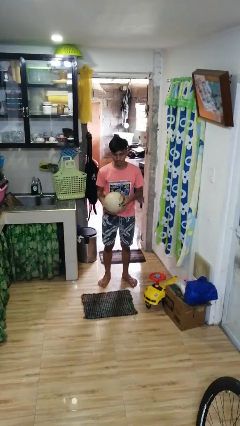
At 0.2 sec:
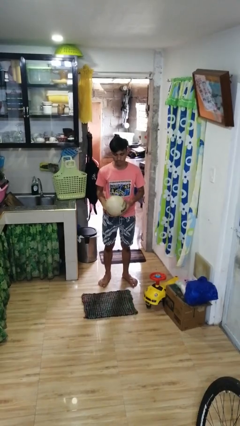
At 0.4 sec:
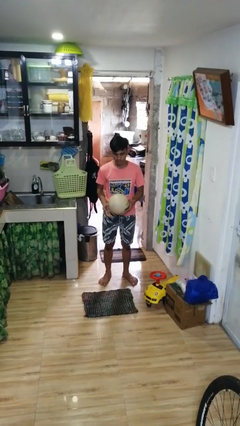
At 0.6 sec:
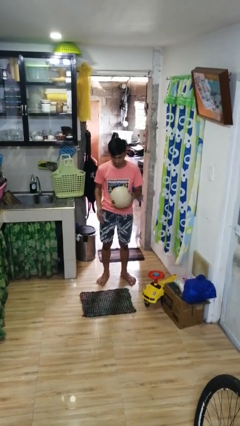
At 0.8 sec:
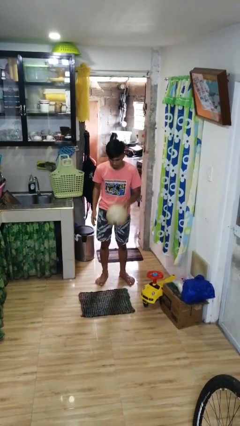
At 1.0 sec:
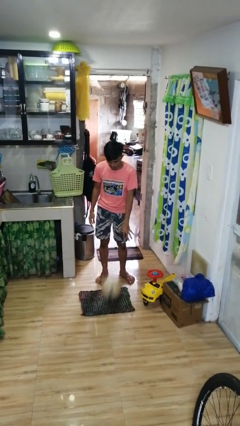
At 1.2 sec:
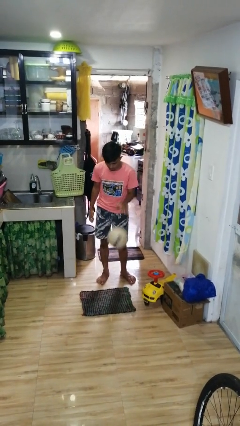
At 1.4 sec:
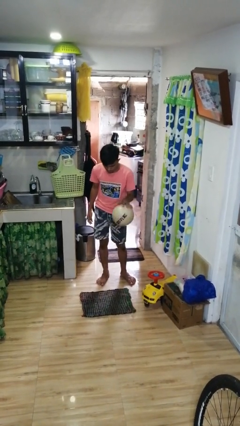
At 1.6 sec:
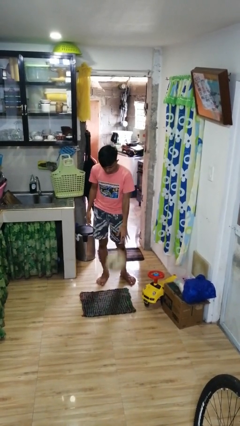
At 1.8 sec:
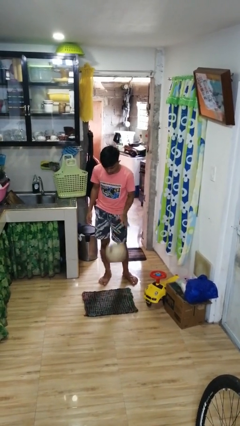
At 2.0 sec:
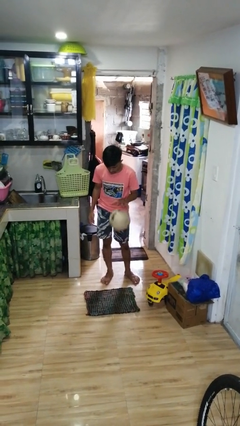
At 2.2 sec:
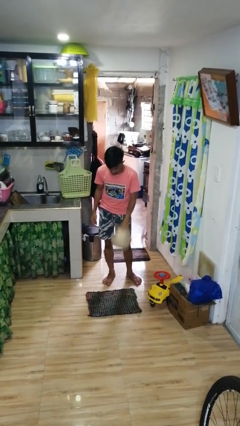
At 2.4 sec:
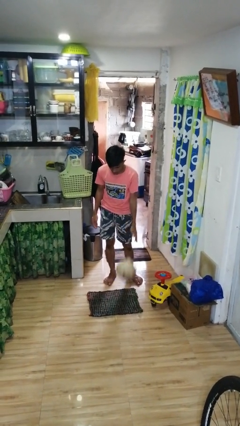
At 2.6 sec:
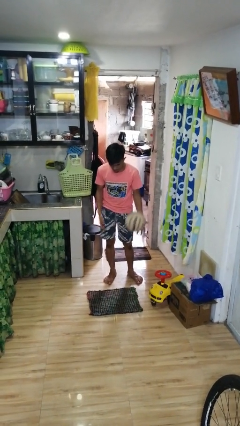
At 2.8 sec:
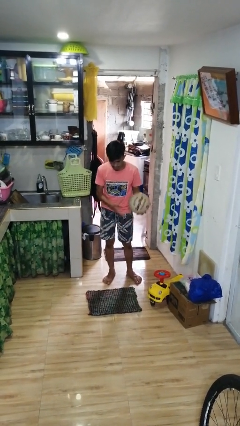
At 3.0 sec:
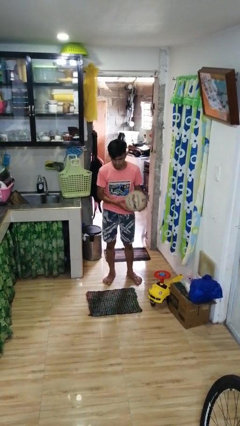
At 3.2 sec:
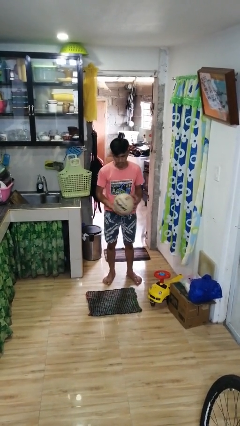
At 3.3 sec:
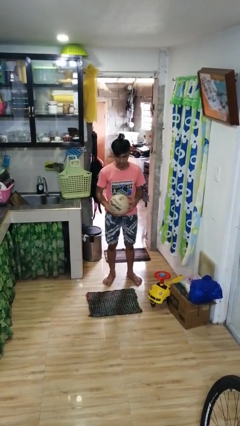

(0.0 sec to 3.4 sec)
person bounces ball on floor

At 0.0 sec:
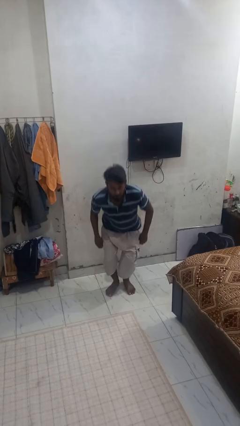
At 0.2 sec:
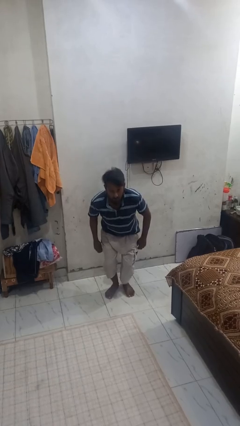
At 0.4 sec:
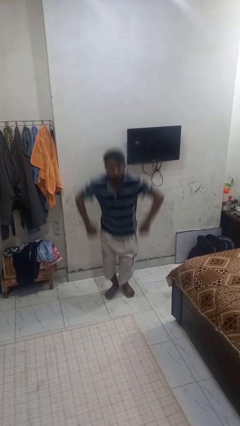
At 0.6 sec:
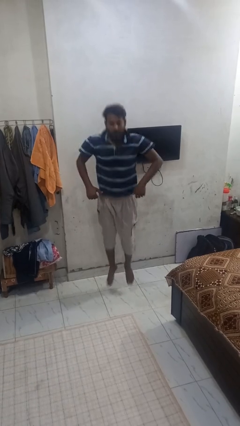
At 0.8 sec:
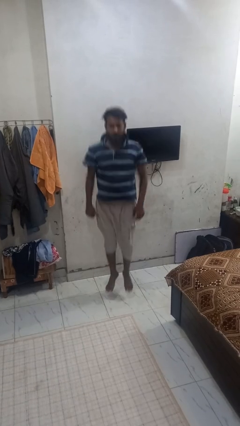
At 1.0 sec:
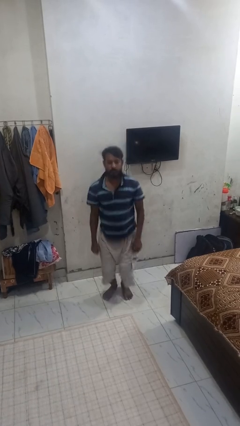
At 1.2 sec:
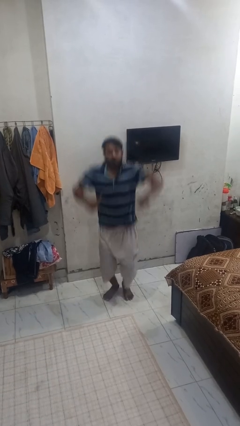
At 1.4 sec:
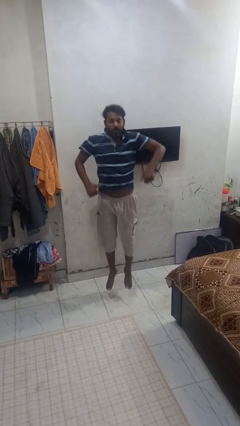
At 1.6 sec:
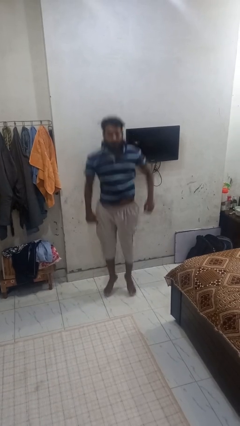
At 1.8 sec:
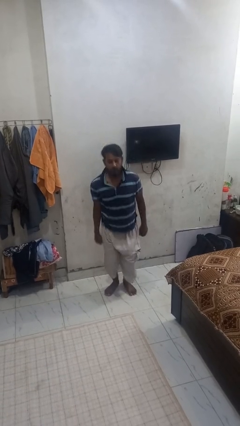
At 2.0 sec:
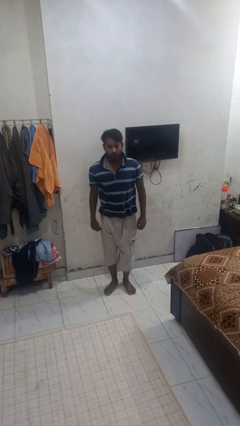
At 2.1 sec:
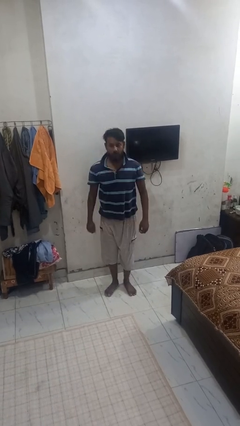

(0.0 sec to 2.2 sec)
person jumps

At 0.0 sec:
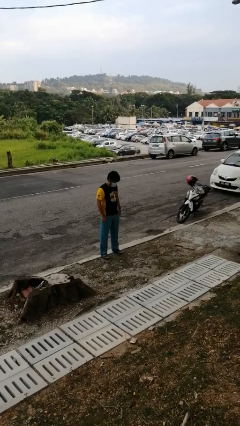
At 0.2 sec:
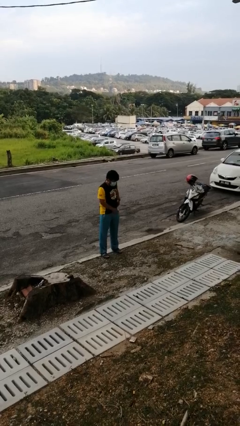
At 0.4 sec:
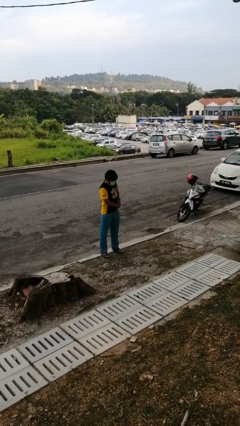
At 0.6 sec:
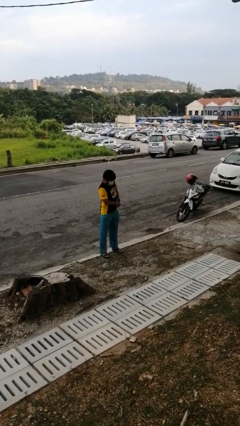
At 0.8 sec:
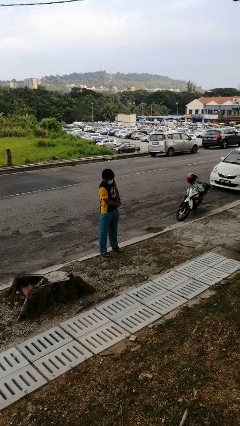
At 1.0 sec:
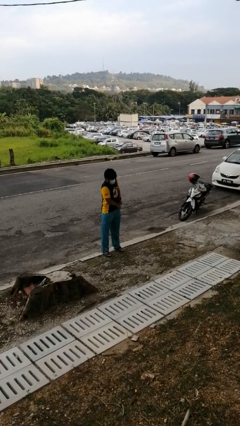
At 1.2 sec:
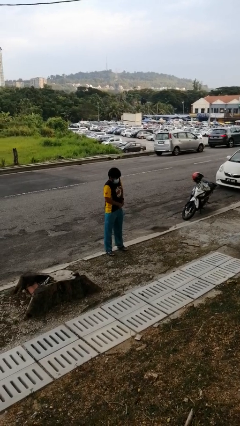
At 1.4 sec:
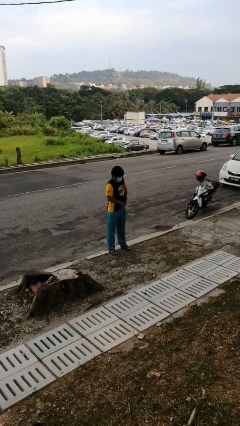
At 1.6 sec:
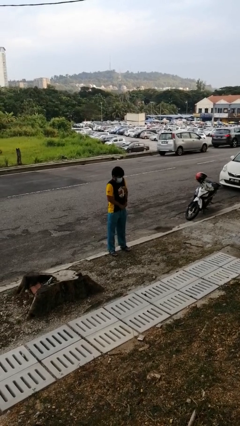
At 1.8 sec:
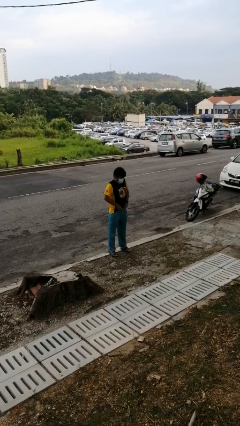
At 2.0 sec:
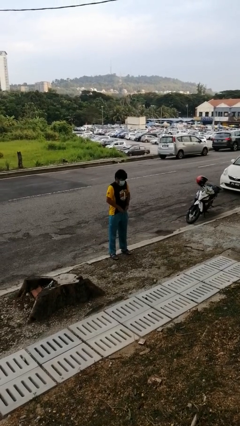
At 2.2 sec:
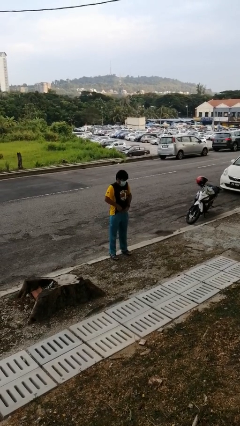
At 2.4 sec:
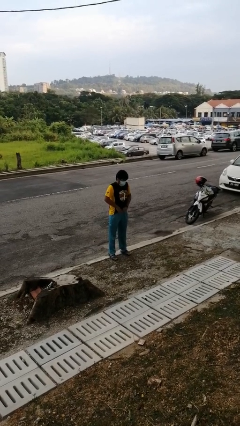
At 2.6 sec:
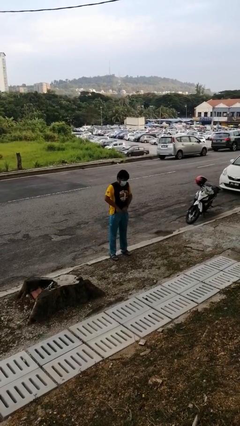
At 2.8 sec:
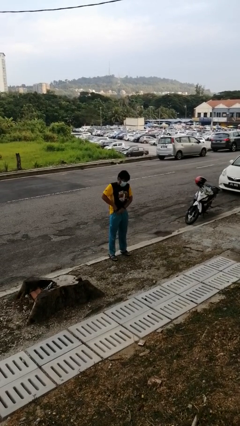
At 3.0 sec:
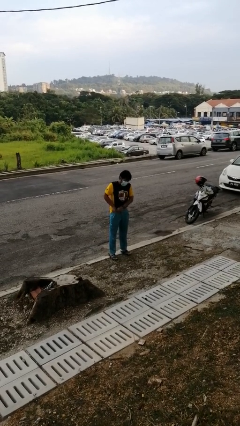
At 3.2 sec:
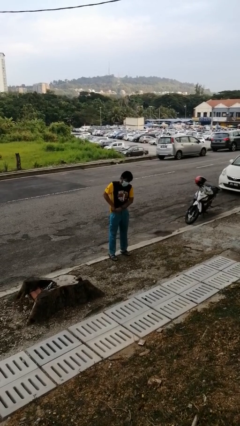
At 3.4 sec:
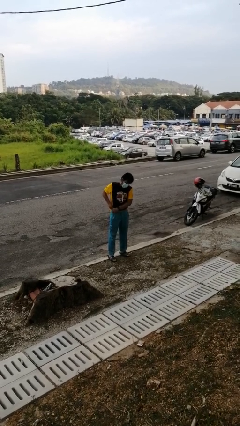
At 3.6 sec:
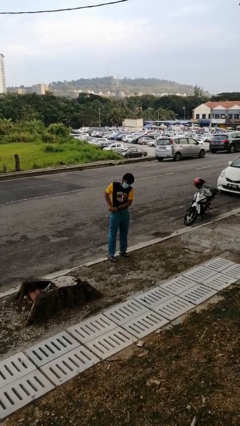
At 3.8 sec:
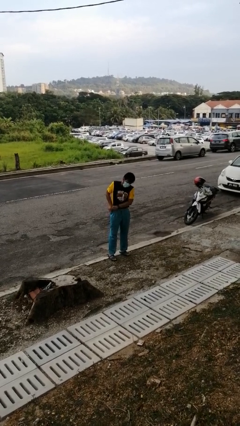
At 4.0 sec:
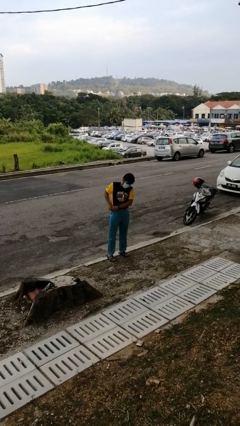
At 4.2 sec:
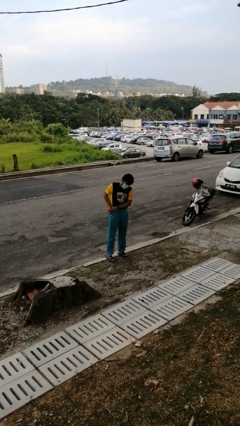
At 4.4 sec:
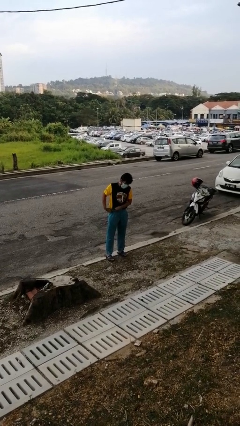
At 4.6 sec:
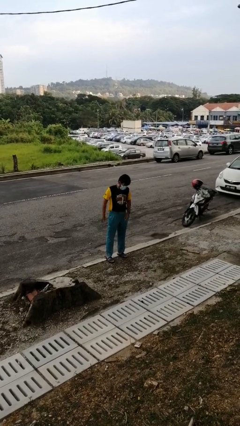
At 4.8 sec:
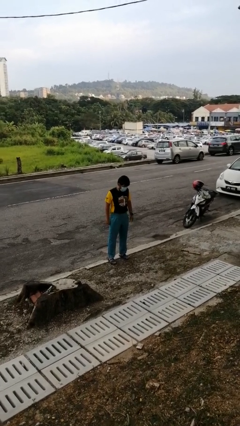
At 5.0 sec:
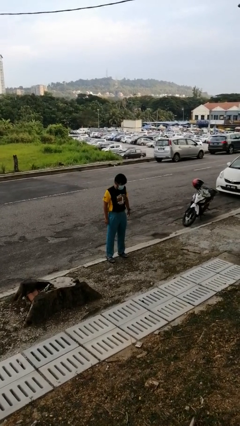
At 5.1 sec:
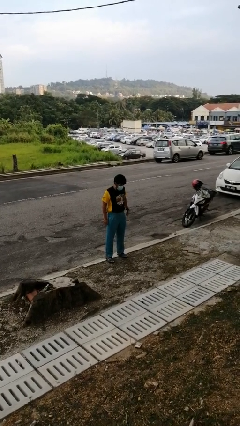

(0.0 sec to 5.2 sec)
person tucks in shirt

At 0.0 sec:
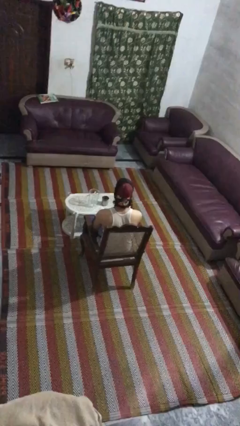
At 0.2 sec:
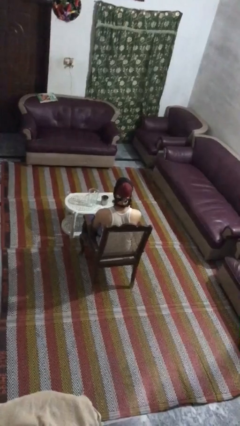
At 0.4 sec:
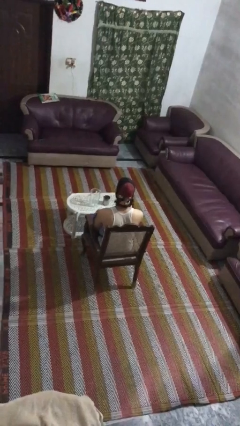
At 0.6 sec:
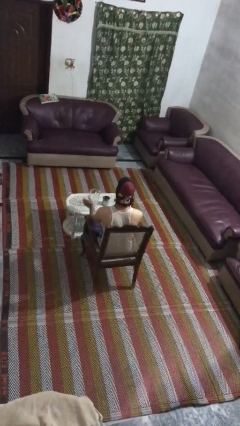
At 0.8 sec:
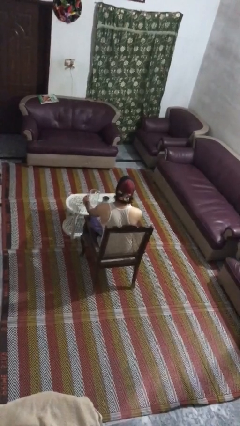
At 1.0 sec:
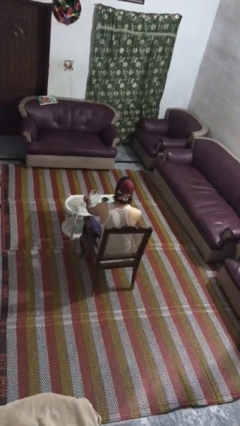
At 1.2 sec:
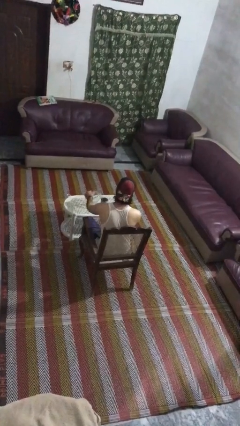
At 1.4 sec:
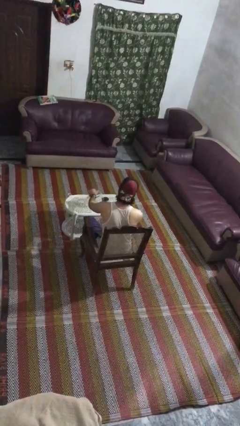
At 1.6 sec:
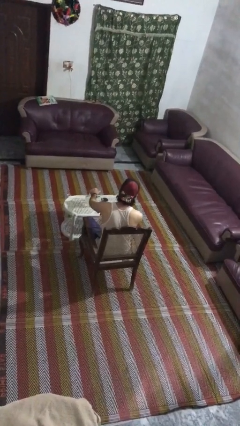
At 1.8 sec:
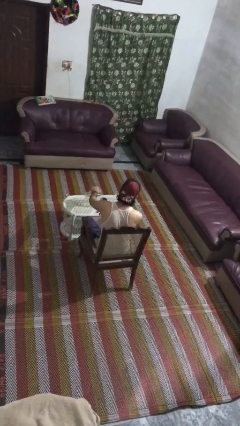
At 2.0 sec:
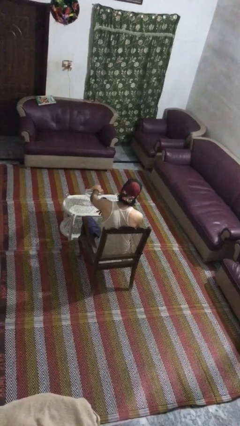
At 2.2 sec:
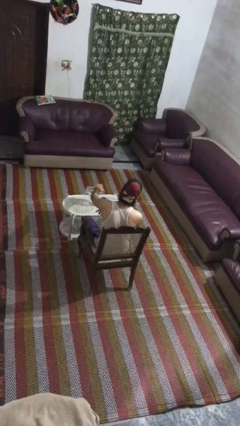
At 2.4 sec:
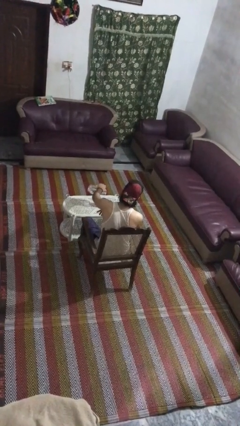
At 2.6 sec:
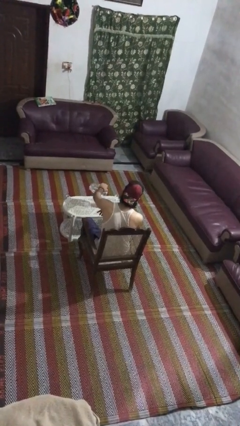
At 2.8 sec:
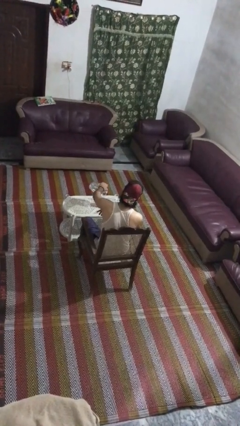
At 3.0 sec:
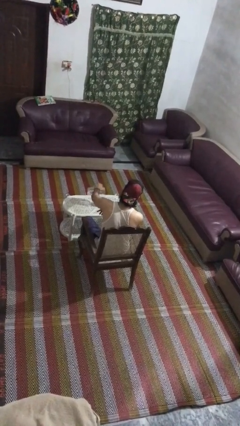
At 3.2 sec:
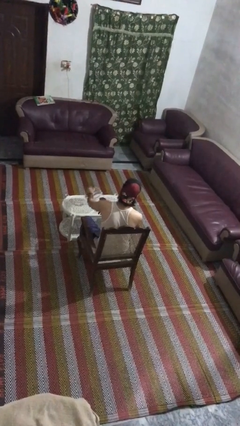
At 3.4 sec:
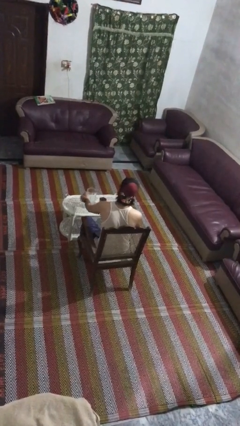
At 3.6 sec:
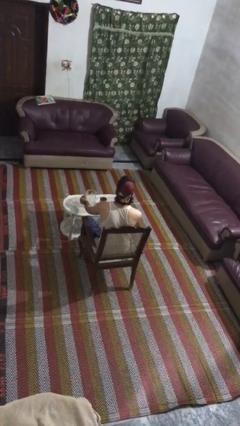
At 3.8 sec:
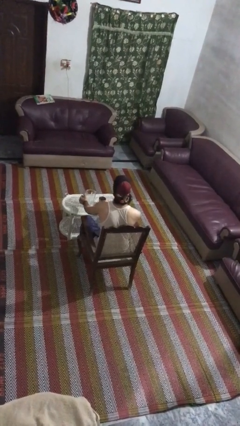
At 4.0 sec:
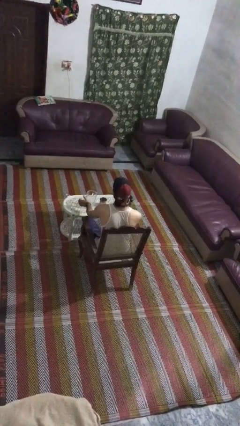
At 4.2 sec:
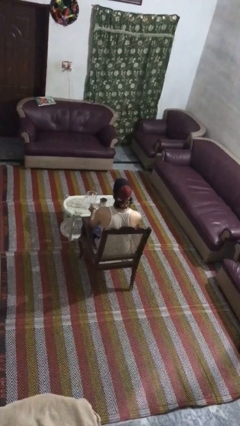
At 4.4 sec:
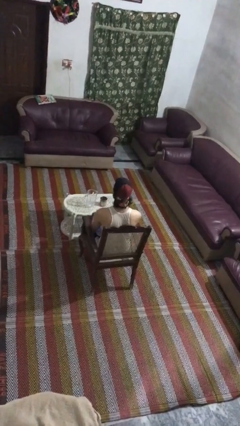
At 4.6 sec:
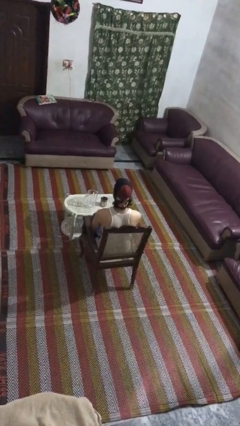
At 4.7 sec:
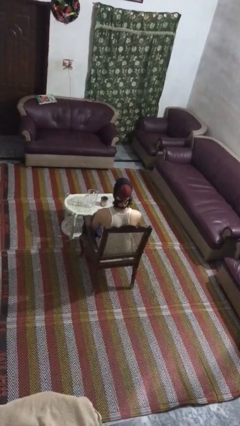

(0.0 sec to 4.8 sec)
person pours coffee into mug

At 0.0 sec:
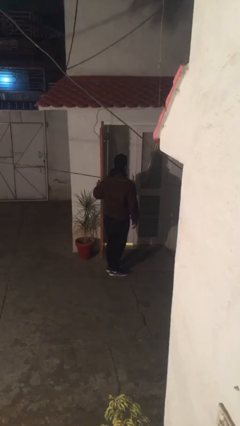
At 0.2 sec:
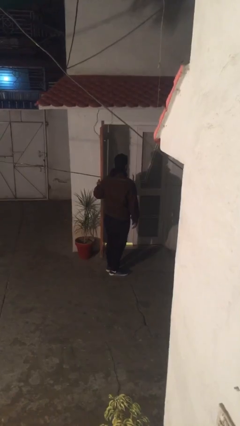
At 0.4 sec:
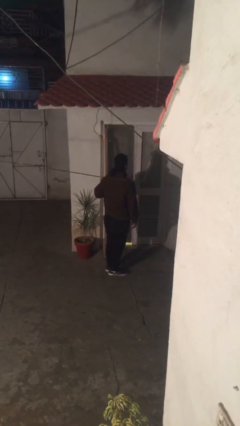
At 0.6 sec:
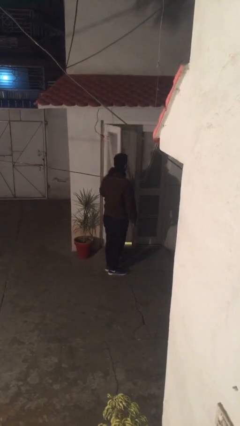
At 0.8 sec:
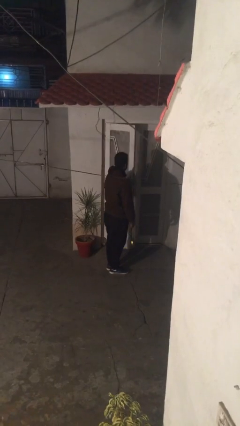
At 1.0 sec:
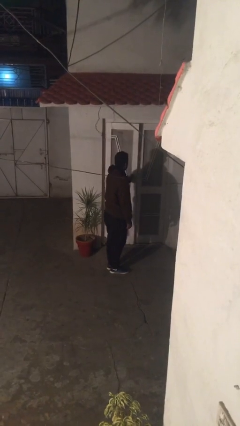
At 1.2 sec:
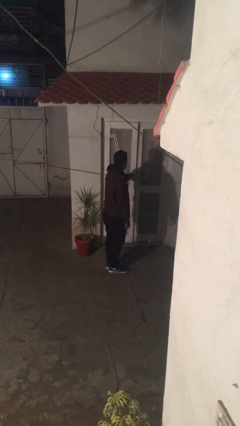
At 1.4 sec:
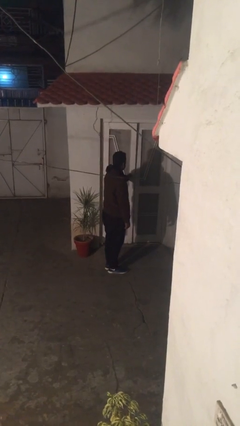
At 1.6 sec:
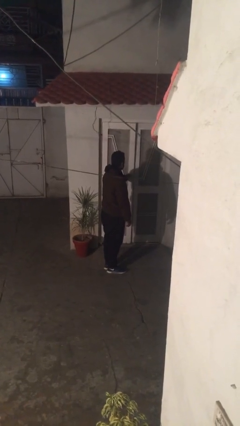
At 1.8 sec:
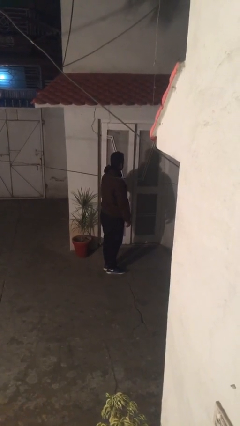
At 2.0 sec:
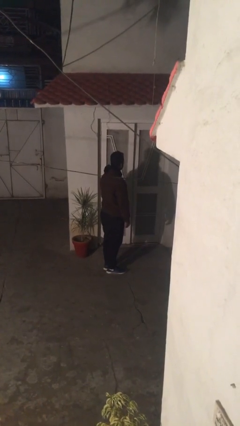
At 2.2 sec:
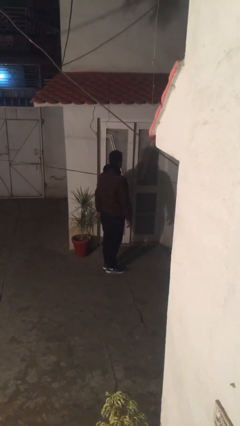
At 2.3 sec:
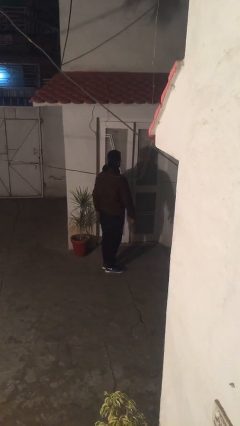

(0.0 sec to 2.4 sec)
person closes facility door
